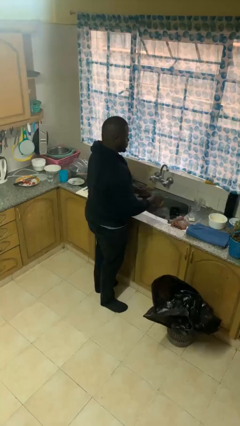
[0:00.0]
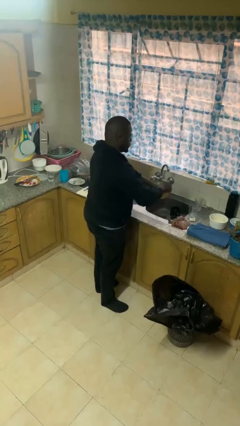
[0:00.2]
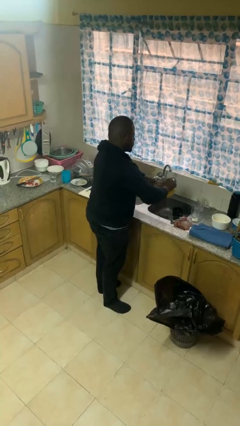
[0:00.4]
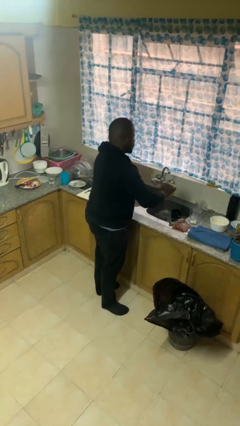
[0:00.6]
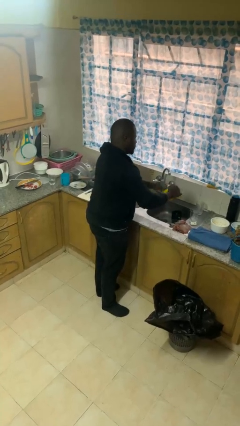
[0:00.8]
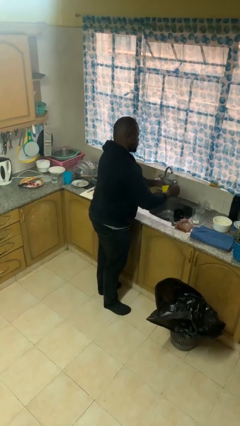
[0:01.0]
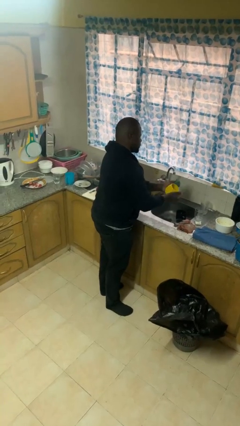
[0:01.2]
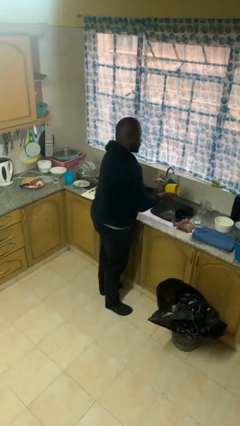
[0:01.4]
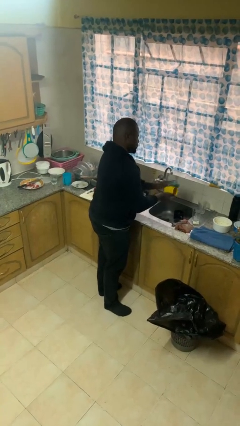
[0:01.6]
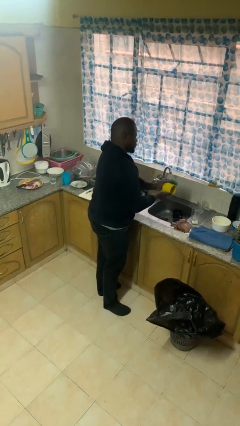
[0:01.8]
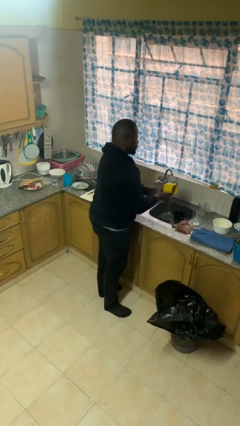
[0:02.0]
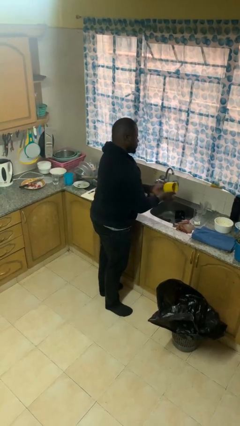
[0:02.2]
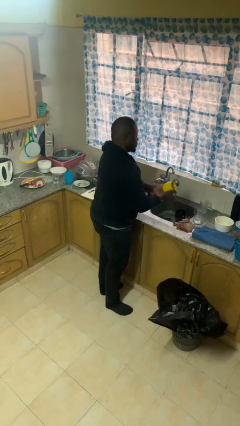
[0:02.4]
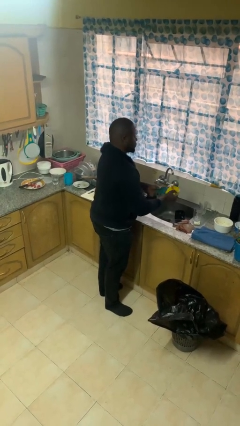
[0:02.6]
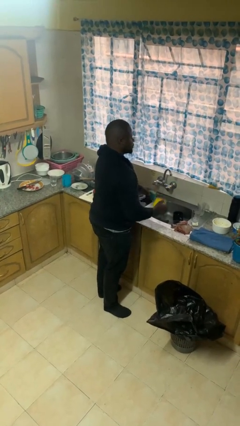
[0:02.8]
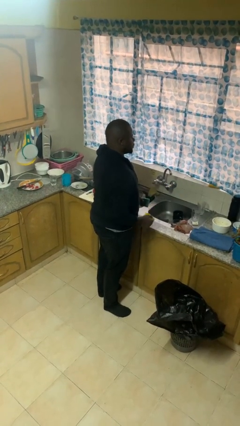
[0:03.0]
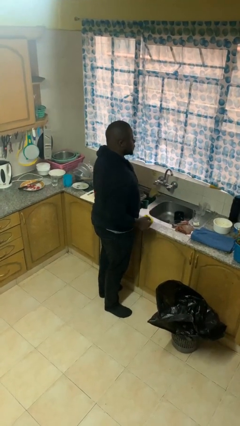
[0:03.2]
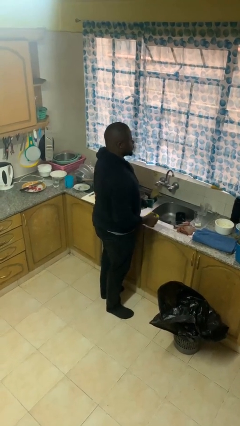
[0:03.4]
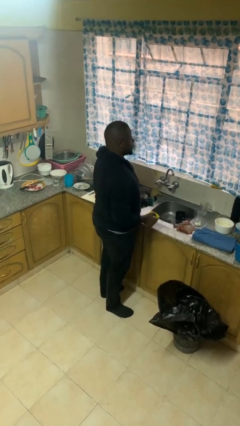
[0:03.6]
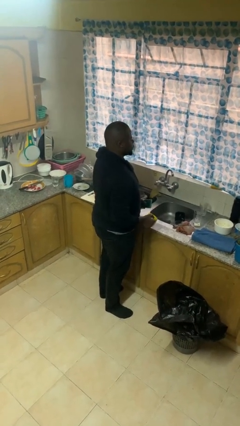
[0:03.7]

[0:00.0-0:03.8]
person washes dish

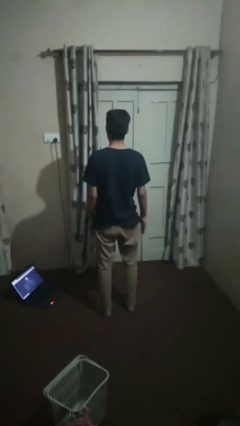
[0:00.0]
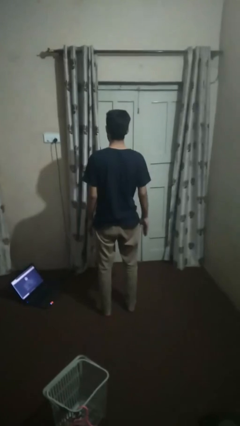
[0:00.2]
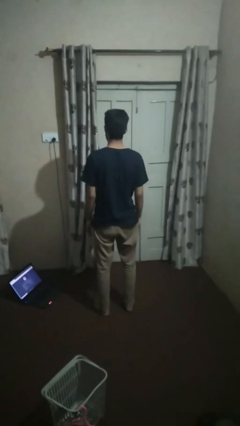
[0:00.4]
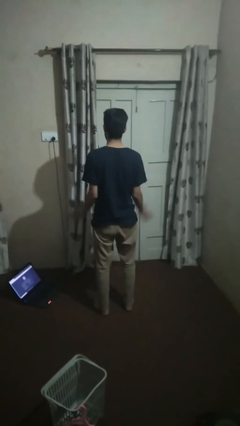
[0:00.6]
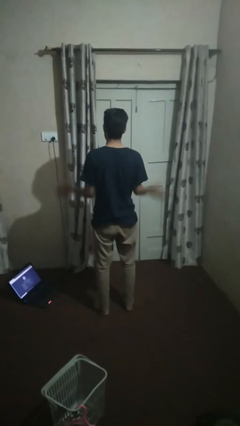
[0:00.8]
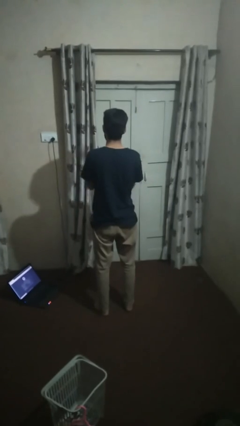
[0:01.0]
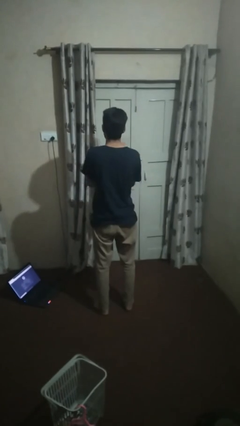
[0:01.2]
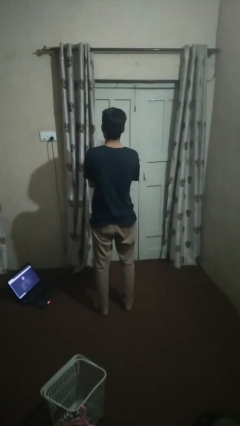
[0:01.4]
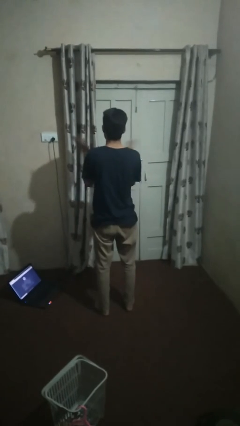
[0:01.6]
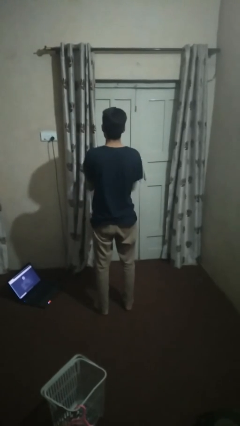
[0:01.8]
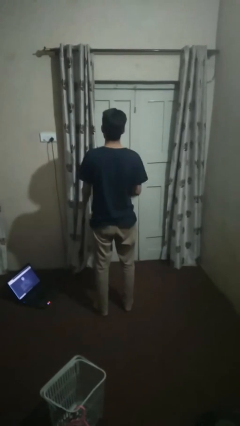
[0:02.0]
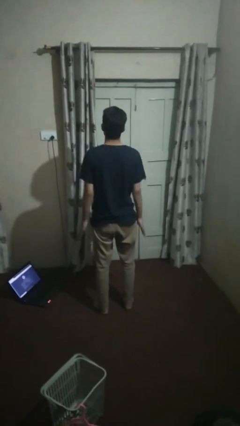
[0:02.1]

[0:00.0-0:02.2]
person claps hands

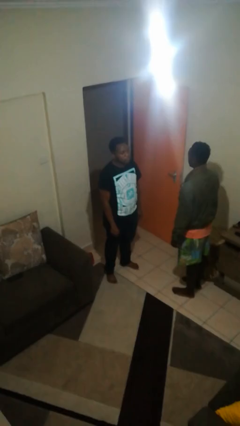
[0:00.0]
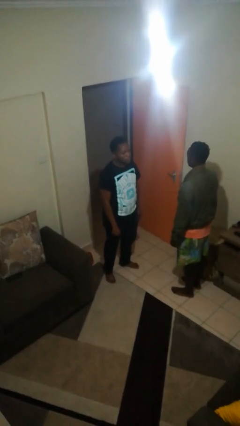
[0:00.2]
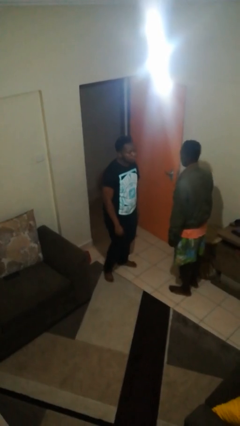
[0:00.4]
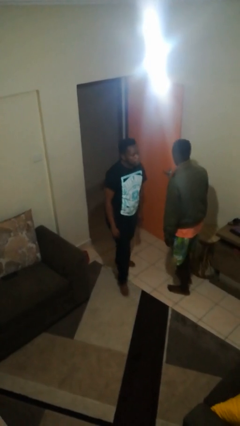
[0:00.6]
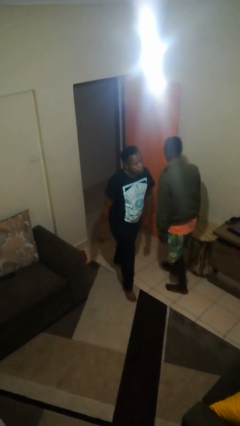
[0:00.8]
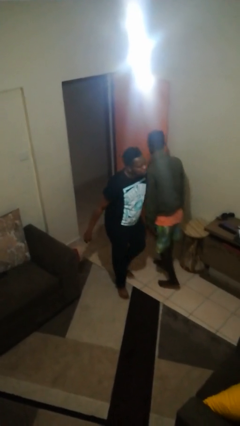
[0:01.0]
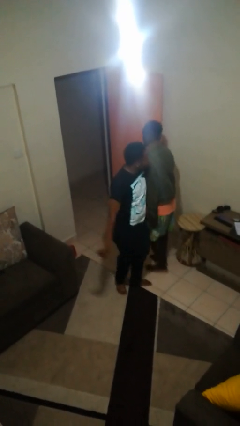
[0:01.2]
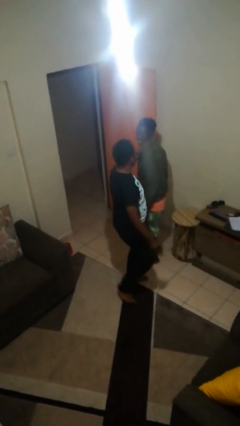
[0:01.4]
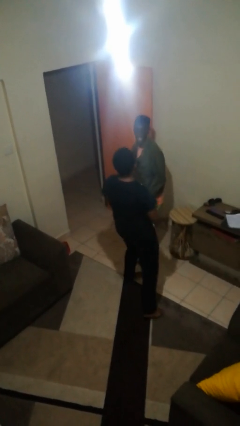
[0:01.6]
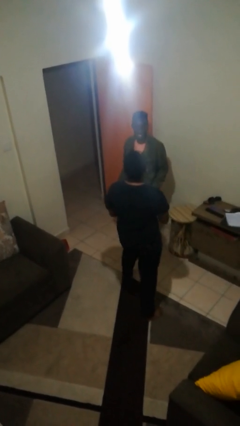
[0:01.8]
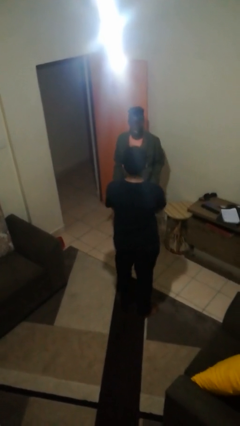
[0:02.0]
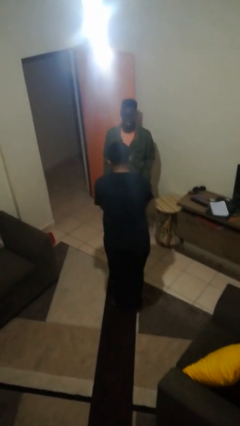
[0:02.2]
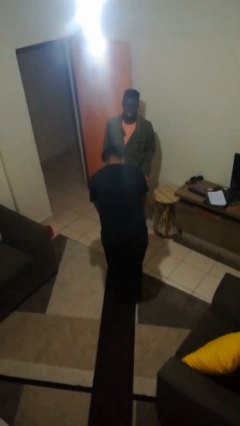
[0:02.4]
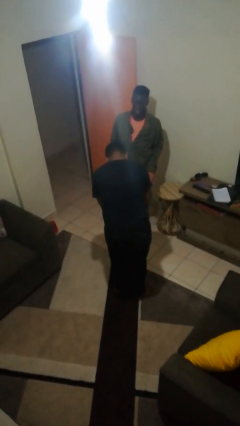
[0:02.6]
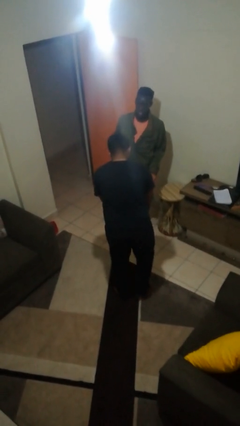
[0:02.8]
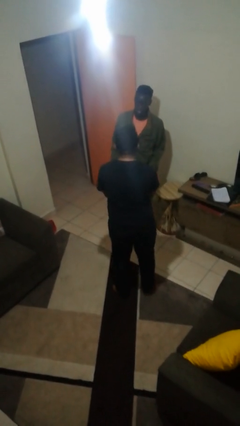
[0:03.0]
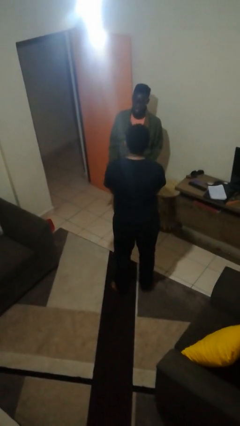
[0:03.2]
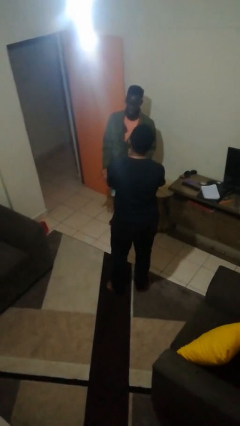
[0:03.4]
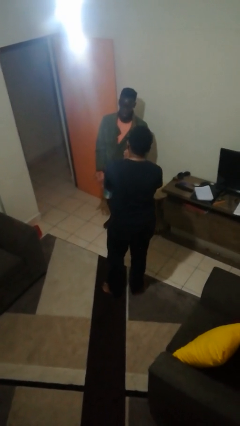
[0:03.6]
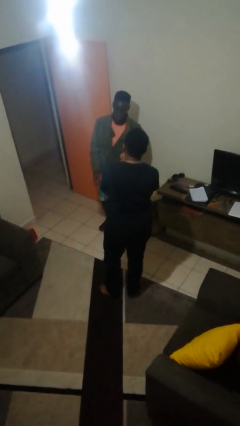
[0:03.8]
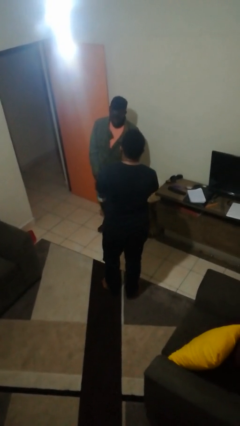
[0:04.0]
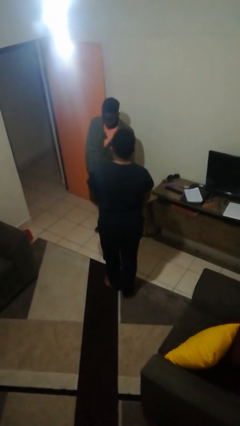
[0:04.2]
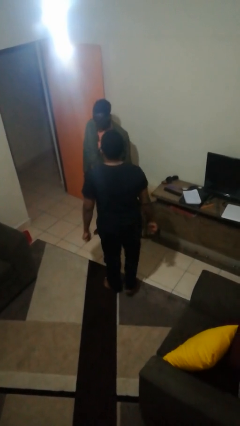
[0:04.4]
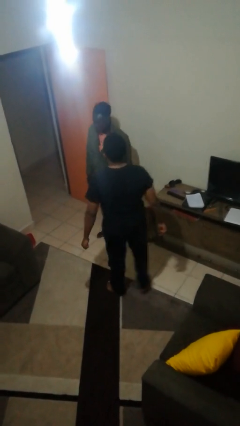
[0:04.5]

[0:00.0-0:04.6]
person bumps into person

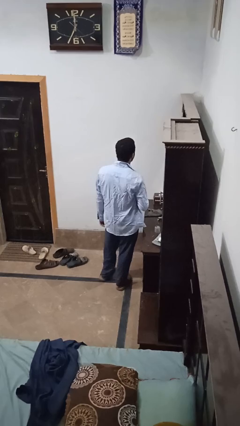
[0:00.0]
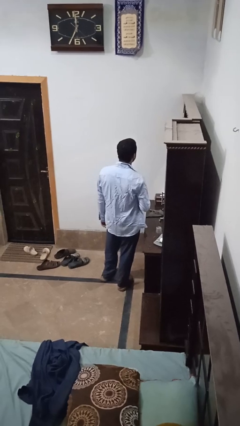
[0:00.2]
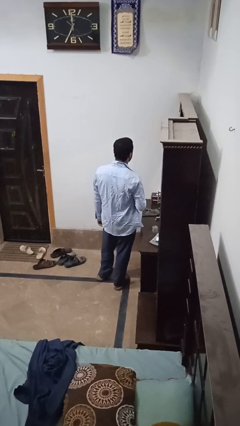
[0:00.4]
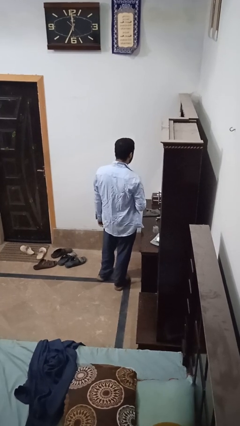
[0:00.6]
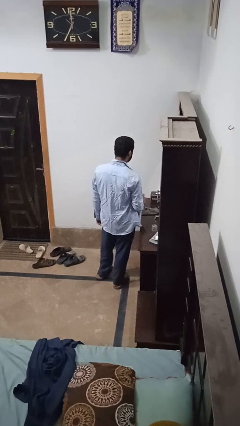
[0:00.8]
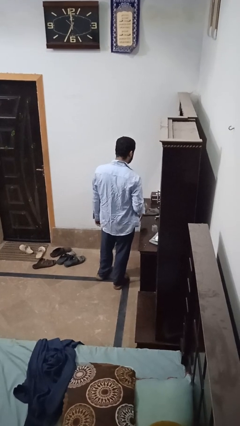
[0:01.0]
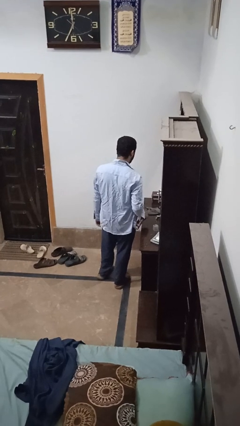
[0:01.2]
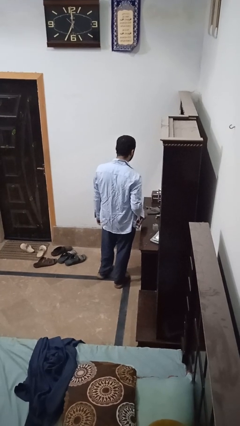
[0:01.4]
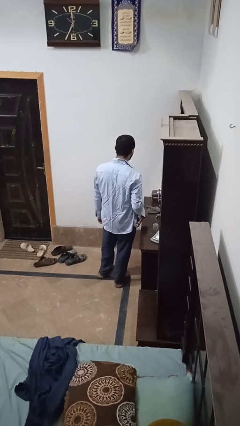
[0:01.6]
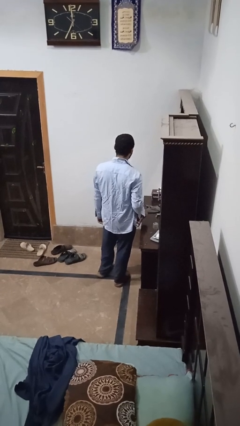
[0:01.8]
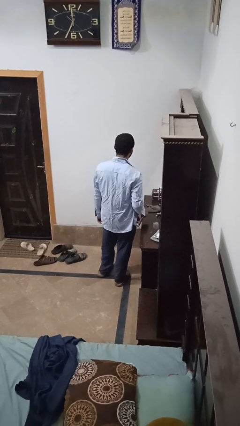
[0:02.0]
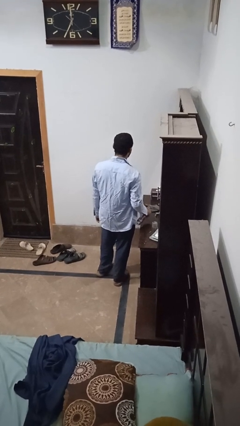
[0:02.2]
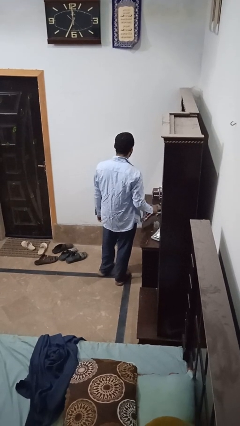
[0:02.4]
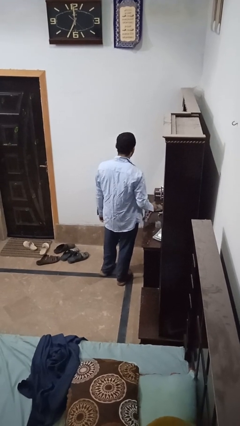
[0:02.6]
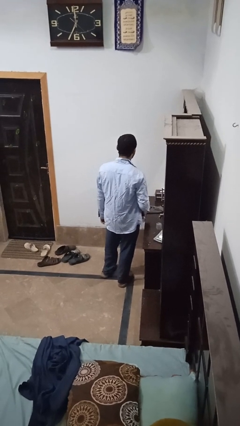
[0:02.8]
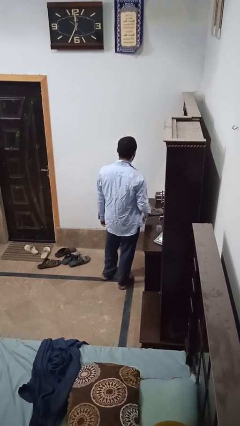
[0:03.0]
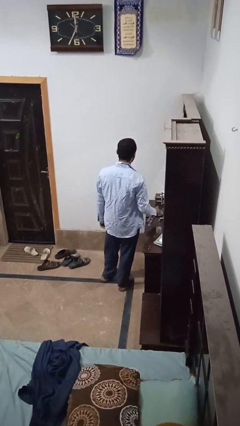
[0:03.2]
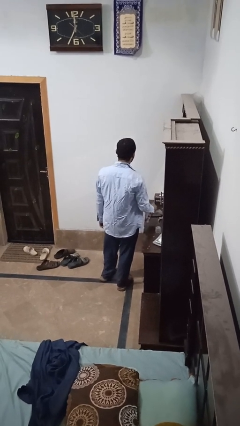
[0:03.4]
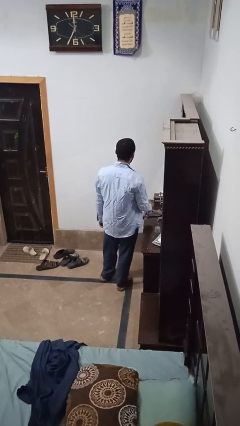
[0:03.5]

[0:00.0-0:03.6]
person sprays from bottle

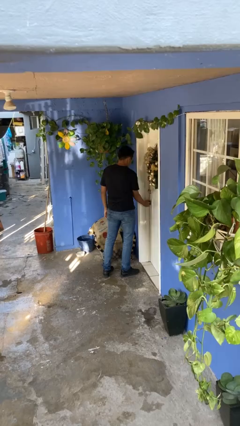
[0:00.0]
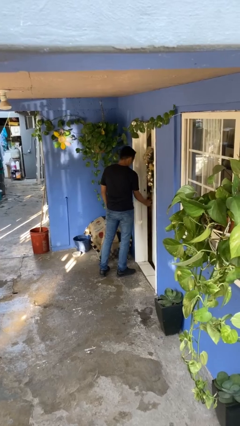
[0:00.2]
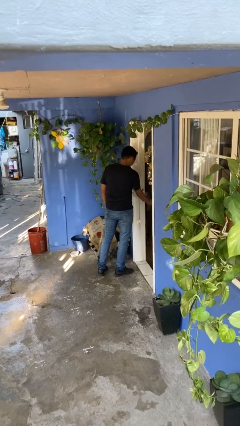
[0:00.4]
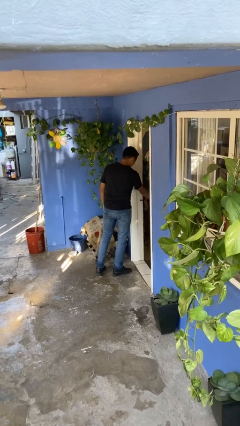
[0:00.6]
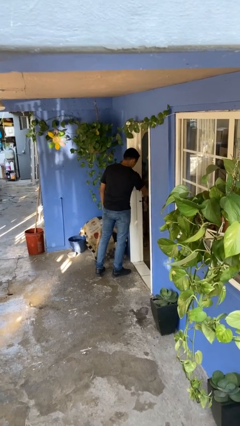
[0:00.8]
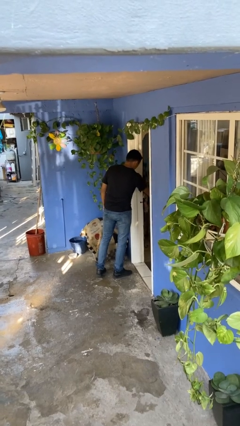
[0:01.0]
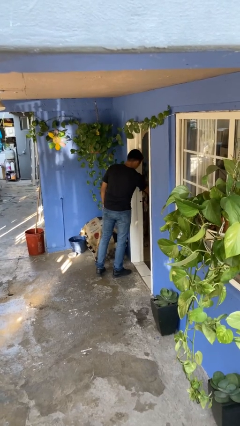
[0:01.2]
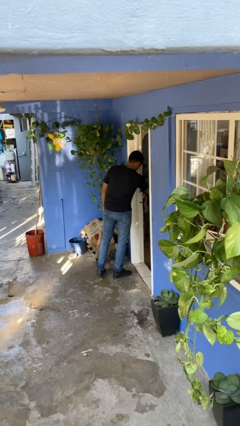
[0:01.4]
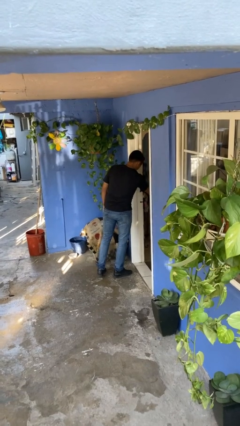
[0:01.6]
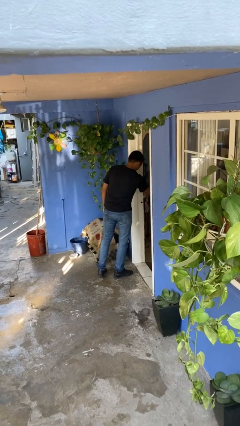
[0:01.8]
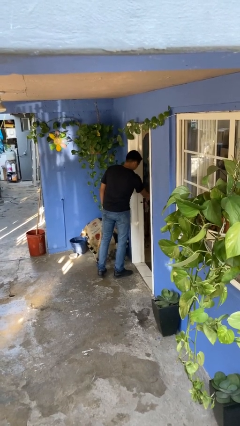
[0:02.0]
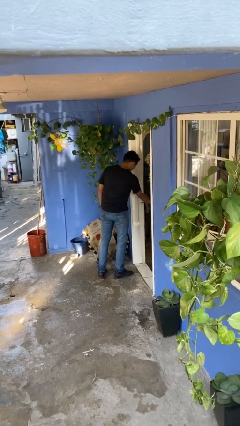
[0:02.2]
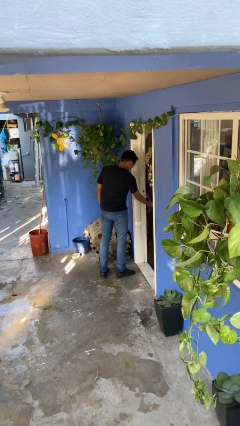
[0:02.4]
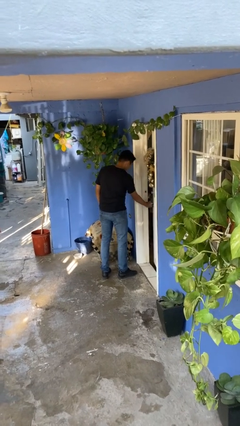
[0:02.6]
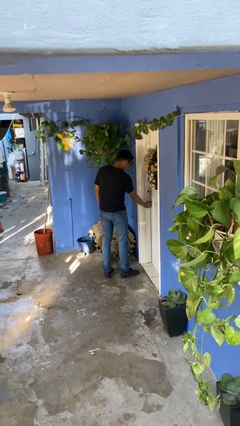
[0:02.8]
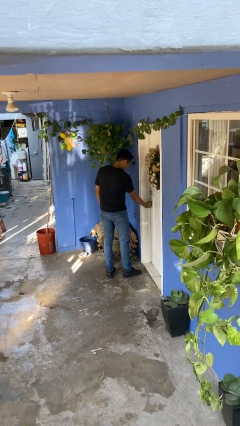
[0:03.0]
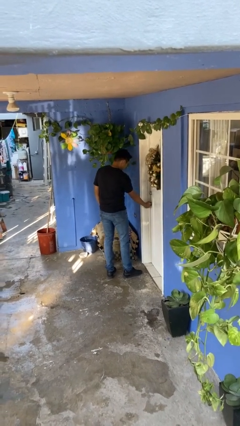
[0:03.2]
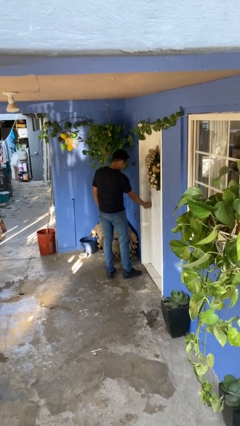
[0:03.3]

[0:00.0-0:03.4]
person opens facility door
